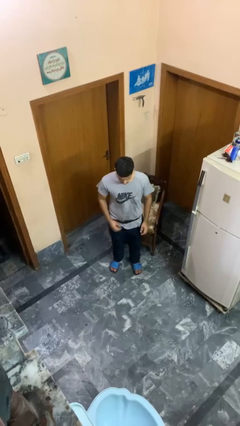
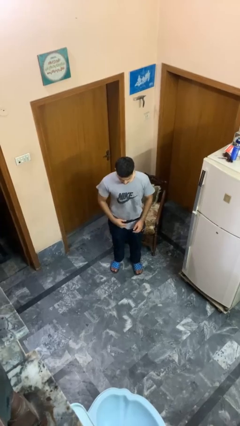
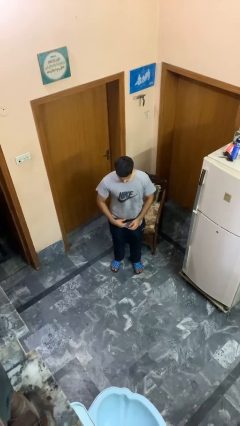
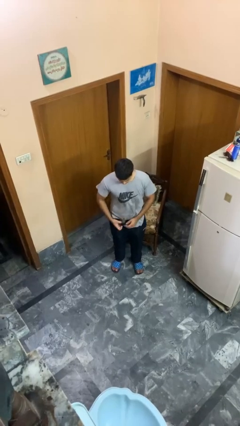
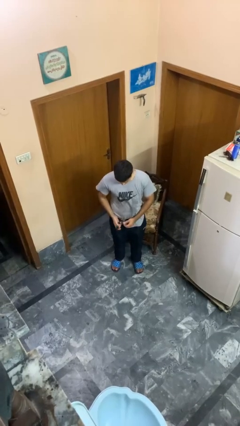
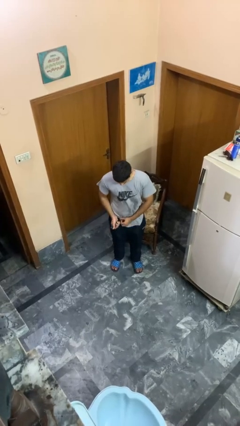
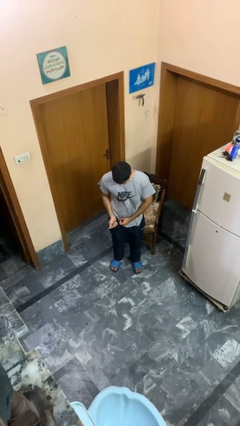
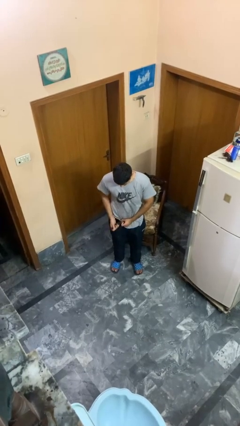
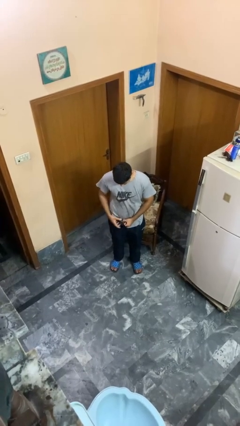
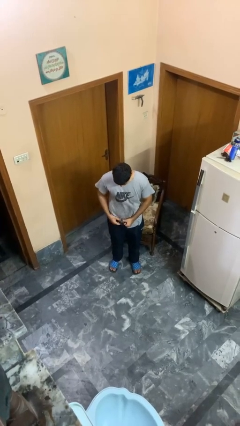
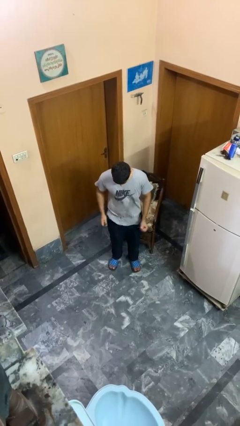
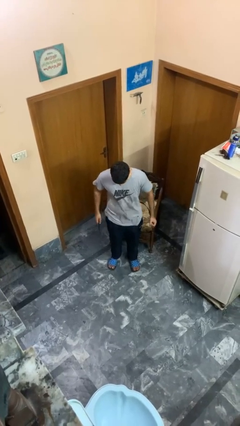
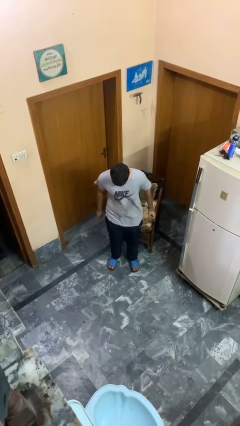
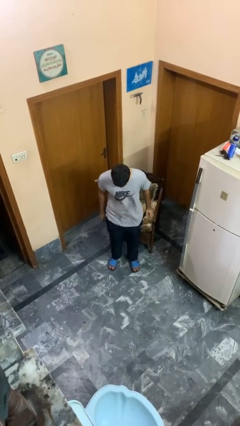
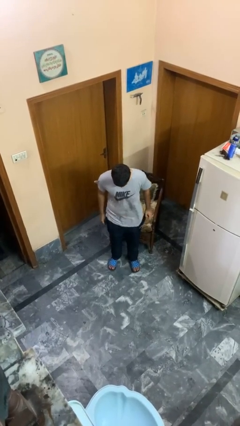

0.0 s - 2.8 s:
person takes off belt

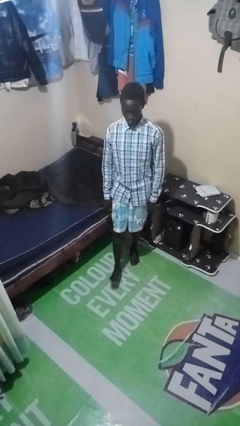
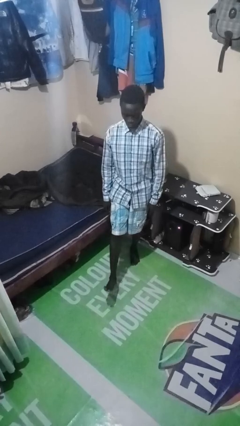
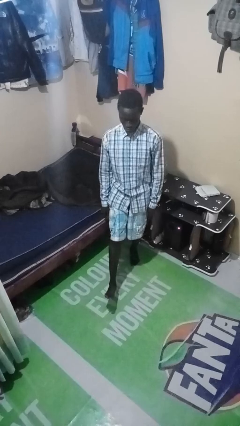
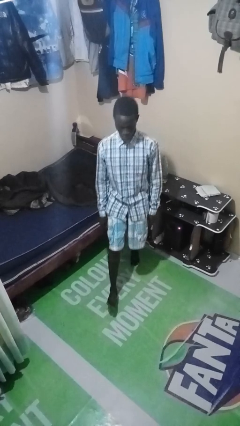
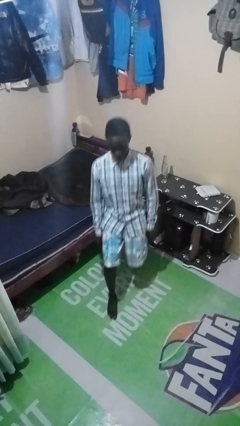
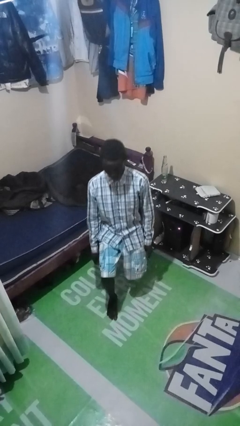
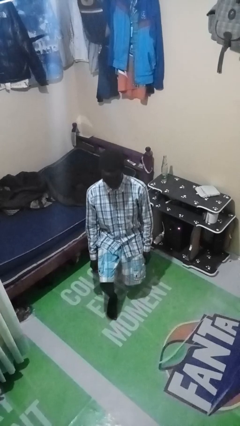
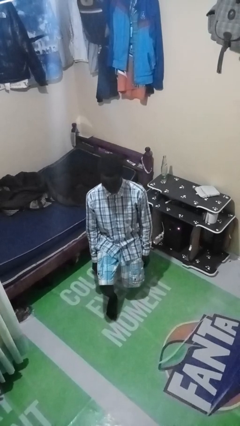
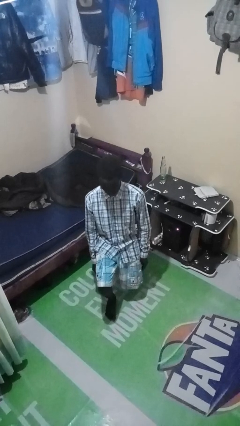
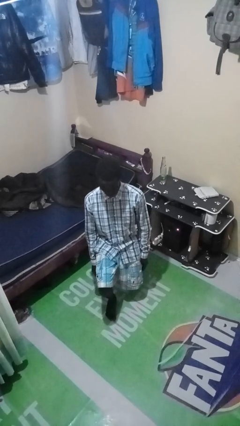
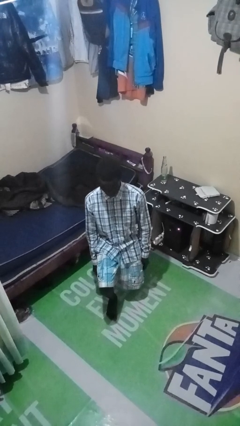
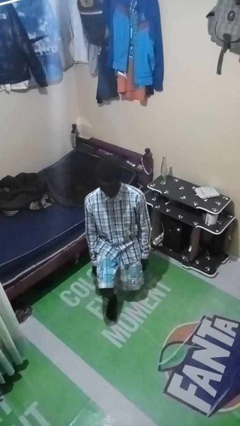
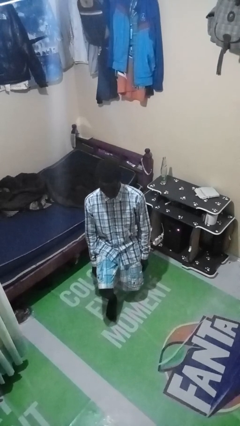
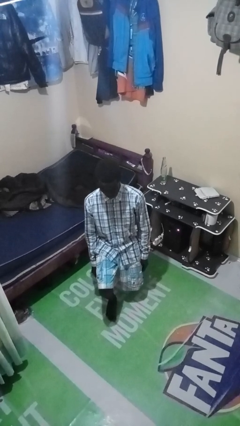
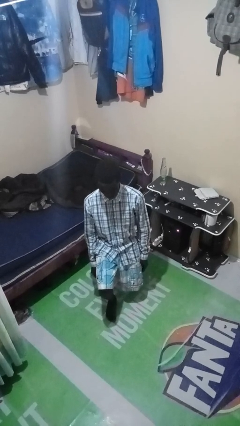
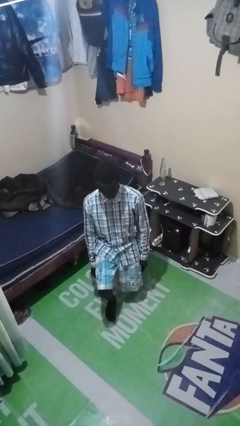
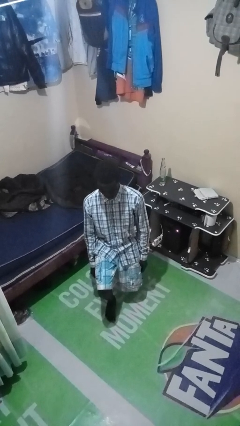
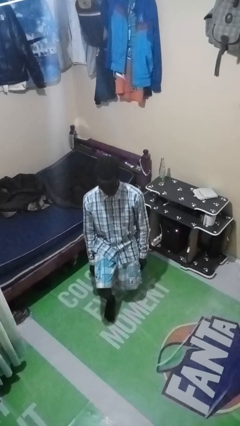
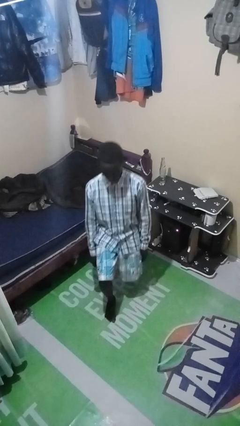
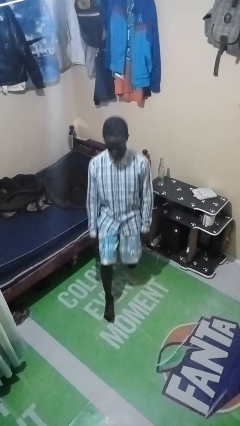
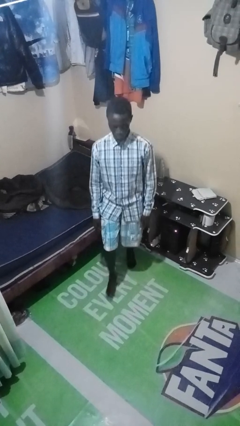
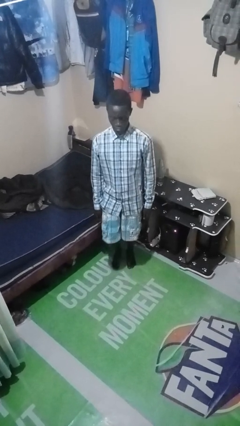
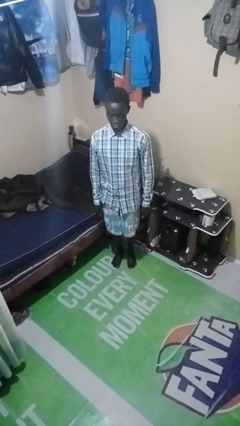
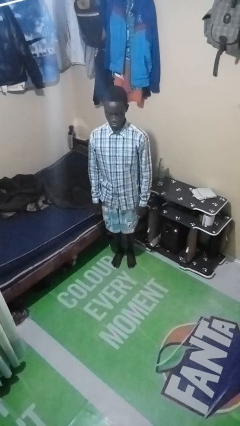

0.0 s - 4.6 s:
person exercises with lunges

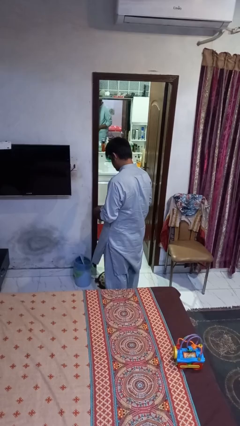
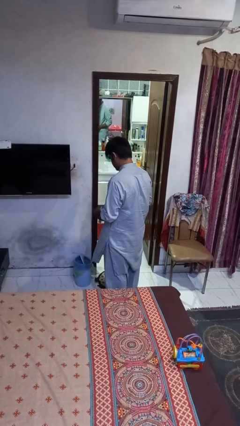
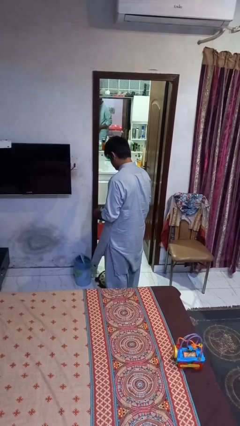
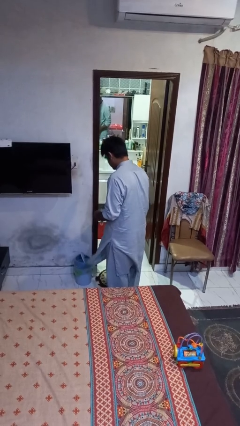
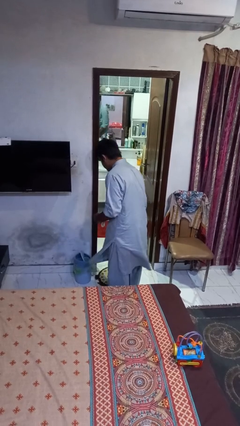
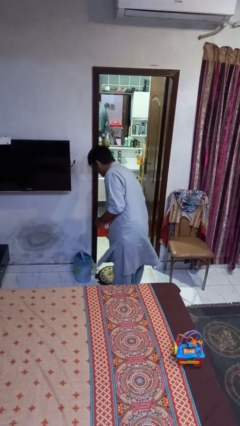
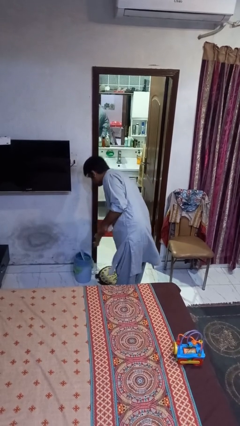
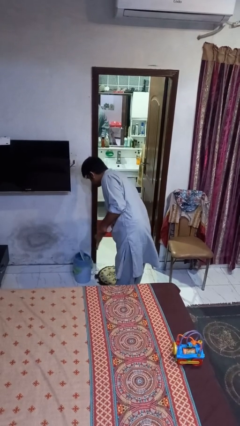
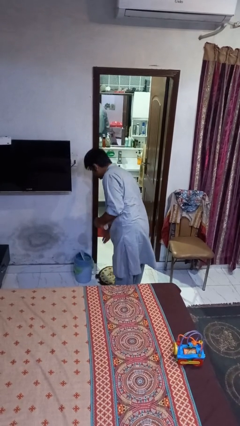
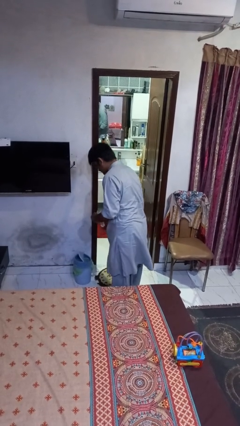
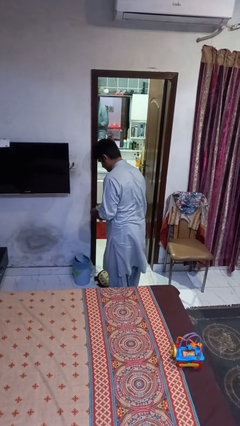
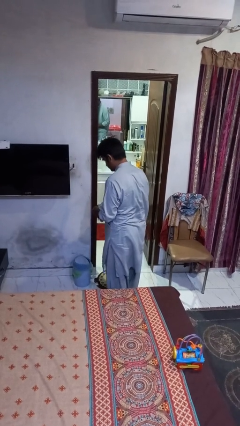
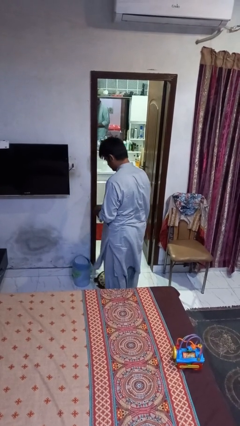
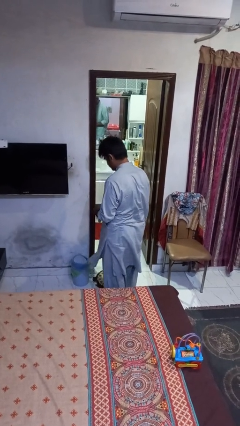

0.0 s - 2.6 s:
person discards trash

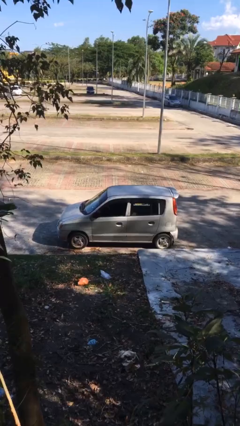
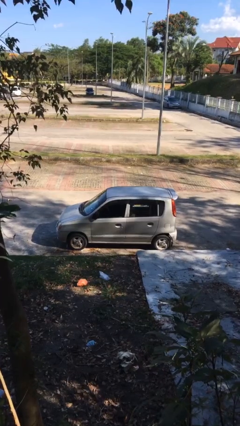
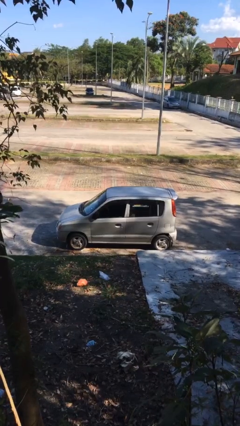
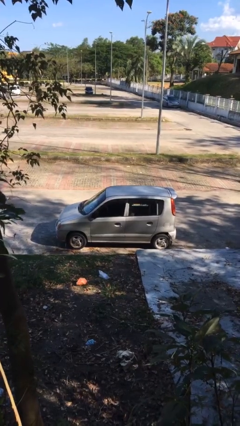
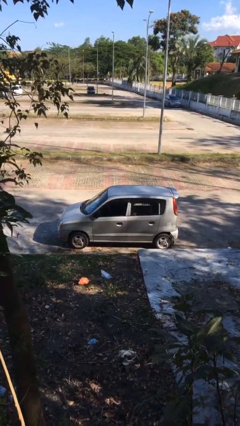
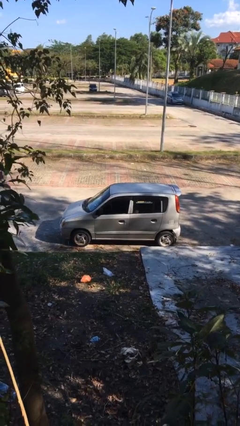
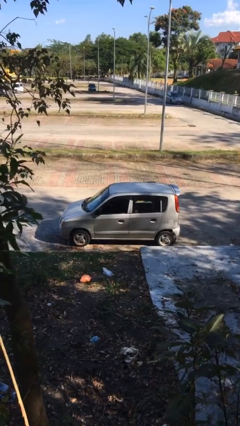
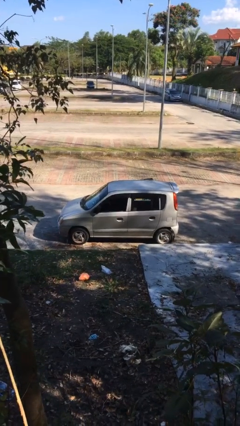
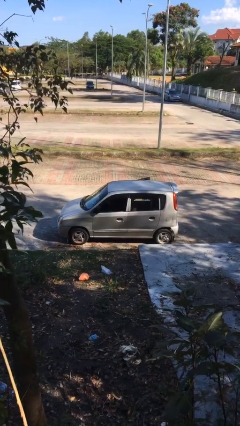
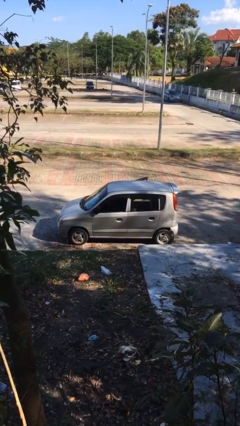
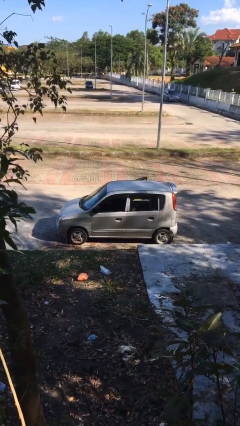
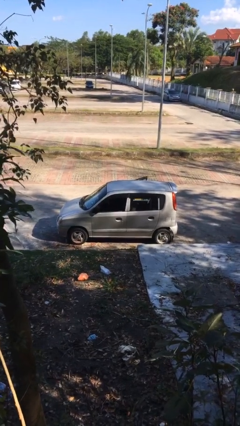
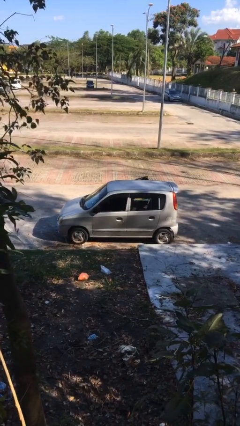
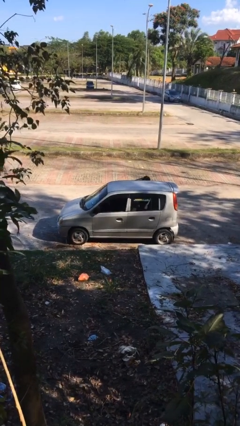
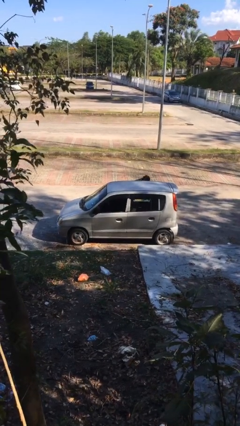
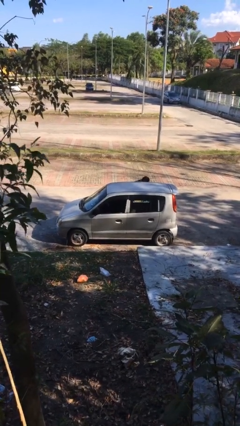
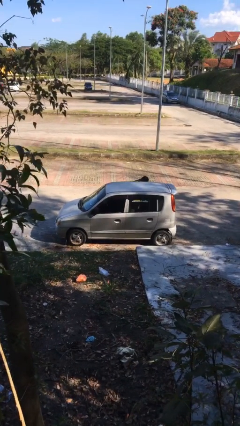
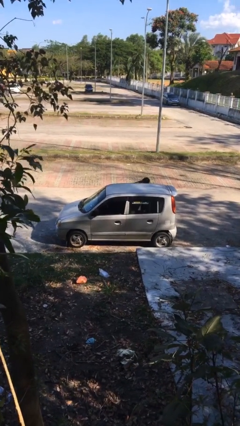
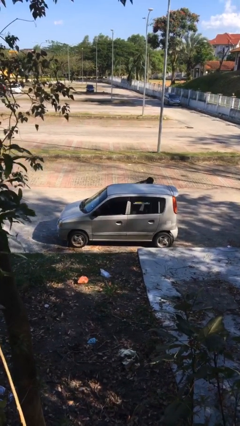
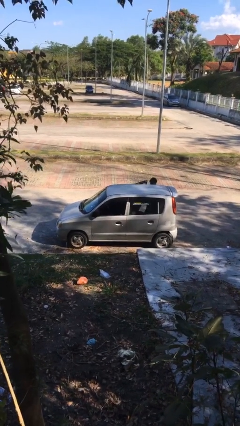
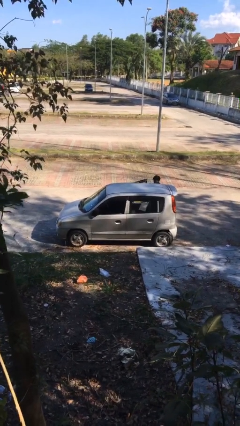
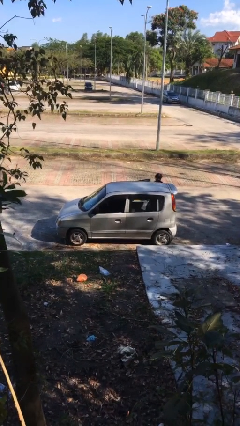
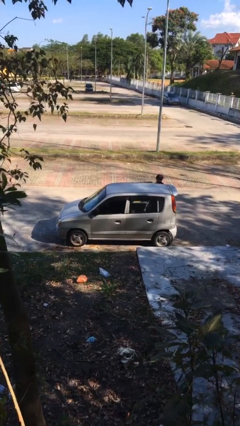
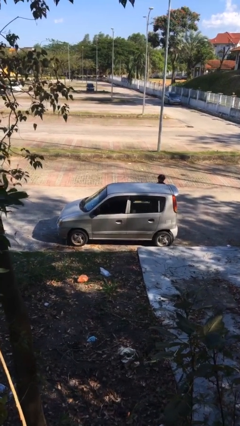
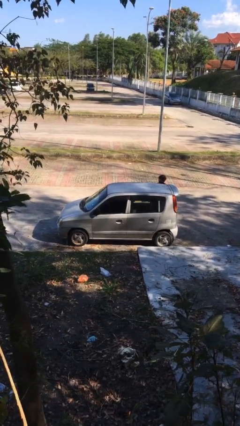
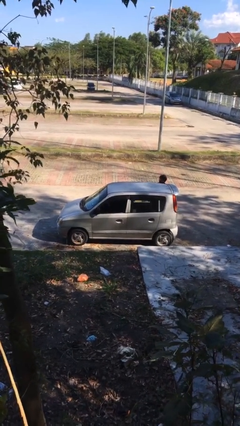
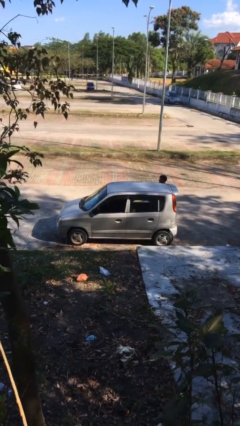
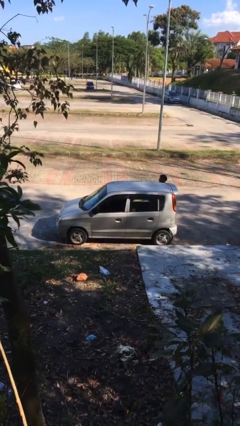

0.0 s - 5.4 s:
car drops off person

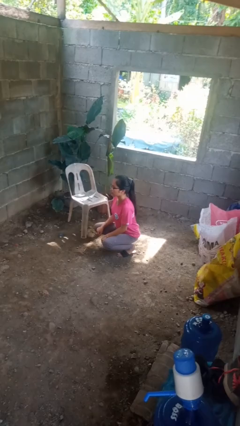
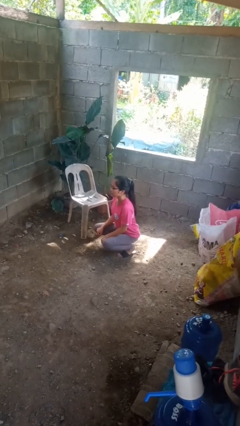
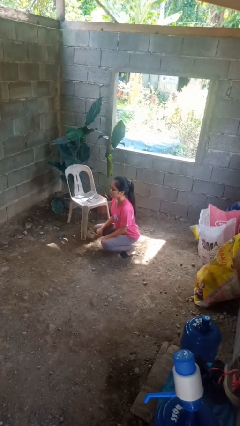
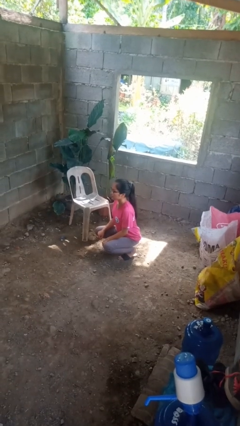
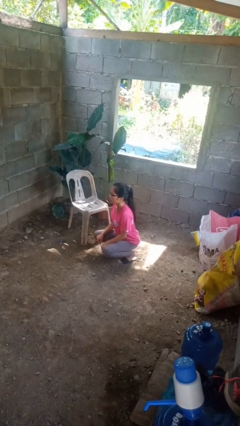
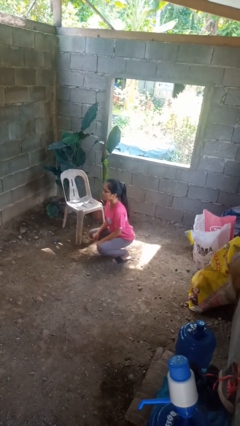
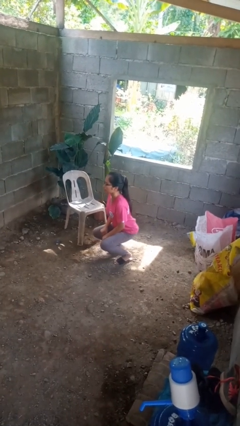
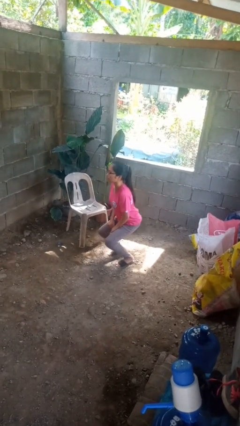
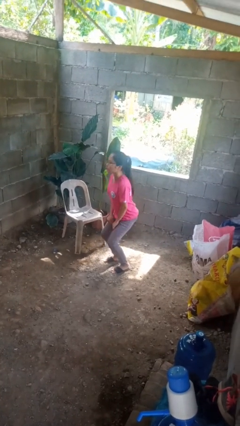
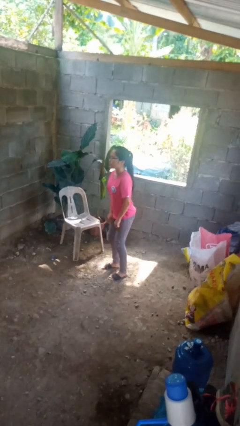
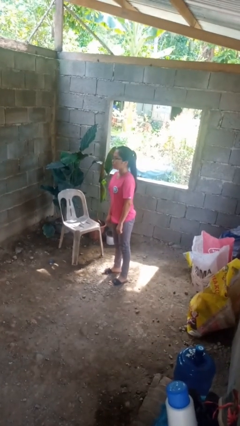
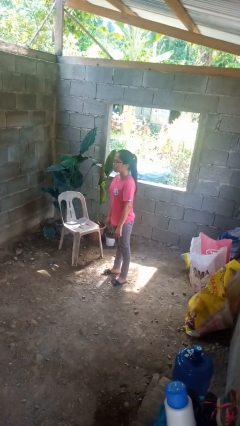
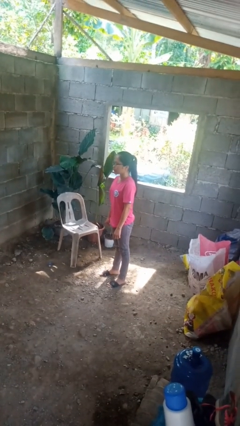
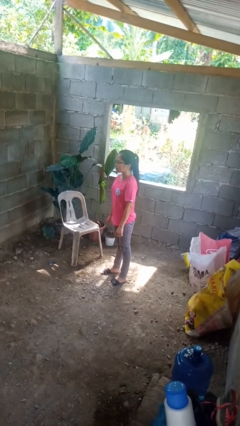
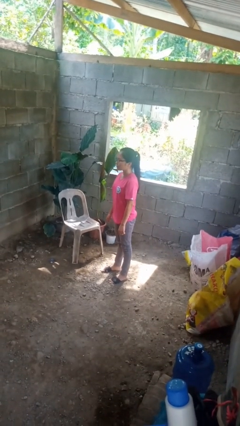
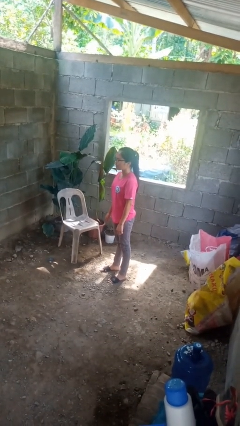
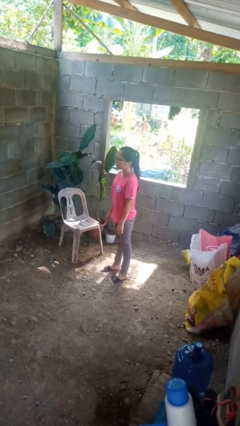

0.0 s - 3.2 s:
person stands up
